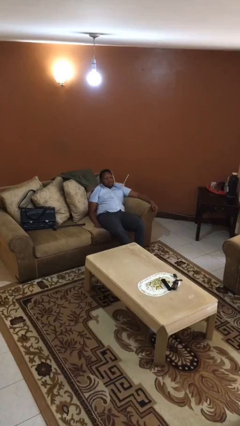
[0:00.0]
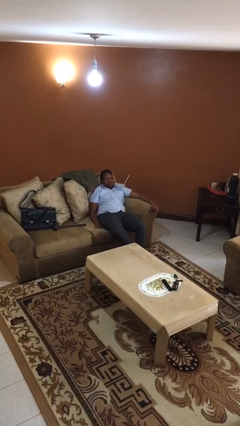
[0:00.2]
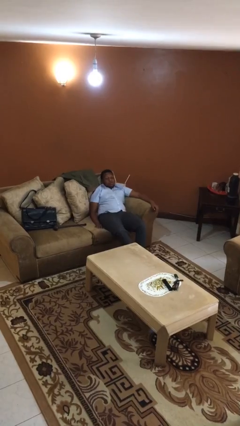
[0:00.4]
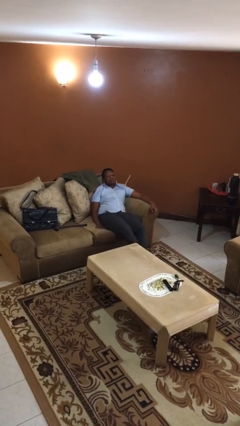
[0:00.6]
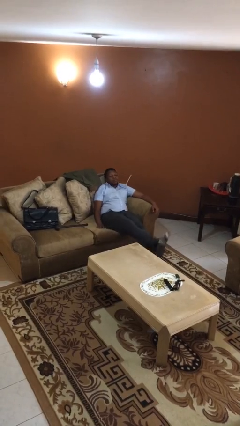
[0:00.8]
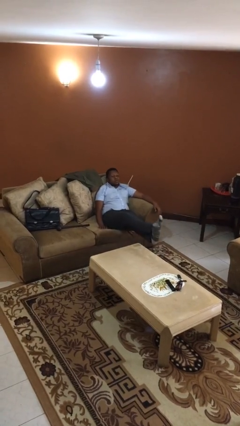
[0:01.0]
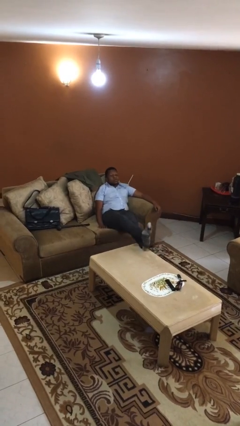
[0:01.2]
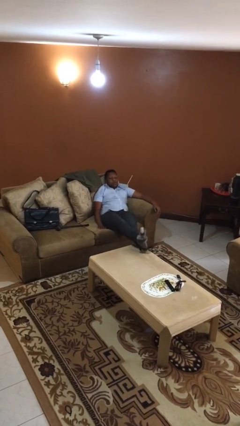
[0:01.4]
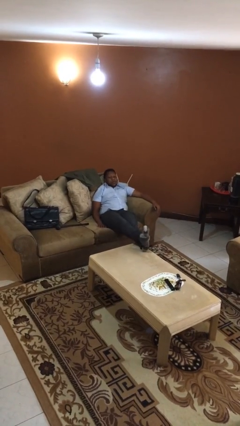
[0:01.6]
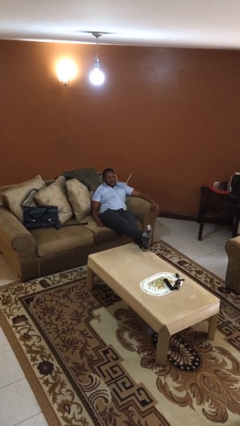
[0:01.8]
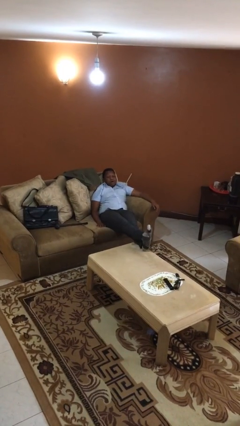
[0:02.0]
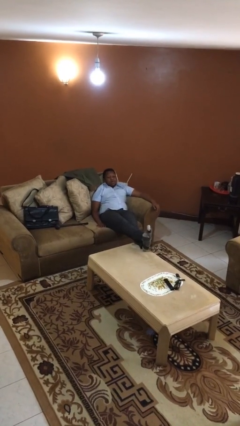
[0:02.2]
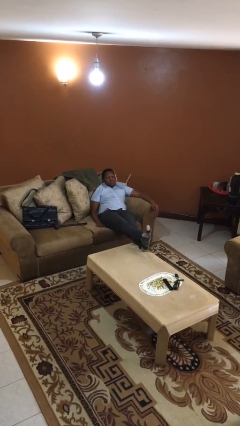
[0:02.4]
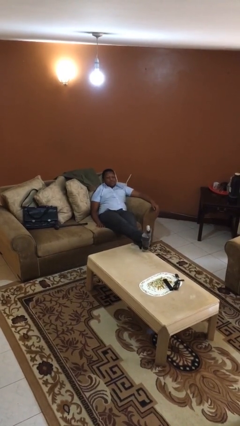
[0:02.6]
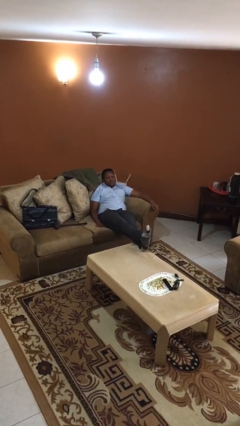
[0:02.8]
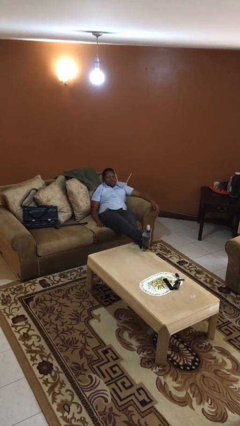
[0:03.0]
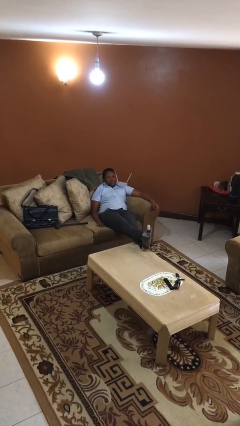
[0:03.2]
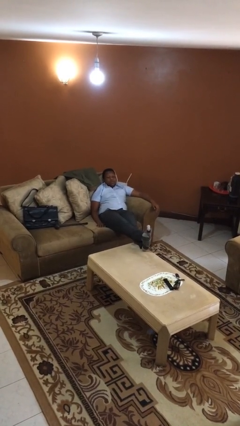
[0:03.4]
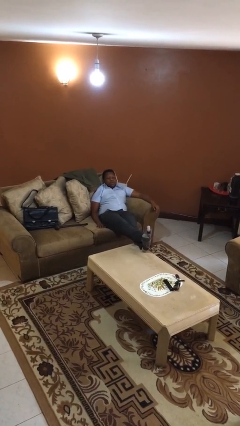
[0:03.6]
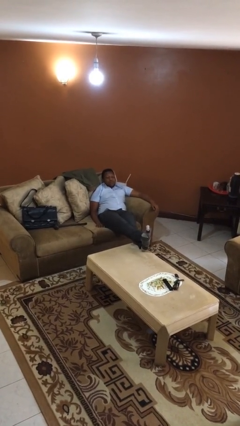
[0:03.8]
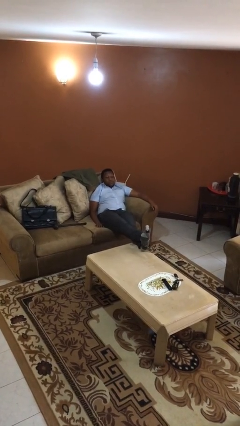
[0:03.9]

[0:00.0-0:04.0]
person puts feet up

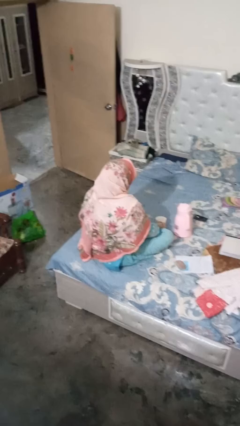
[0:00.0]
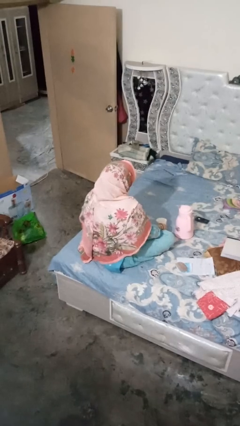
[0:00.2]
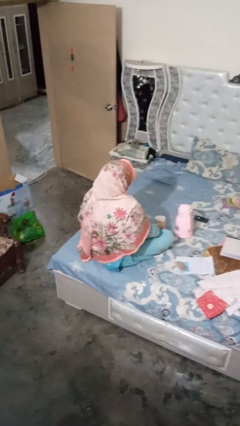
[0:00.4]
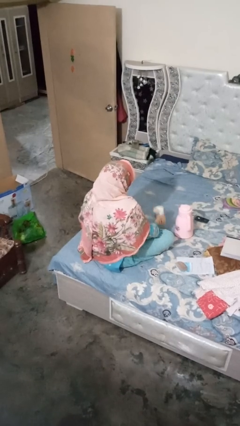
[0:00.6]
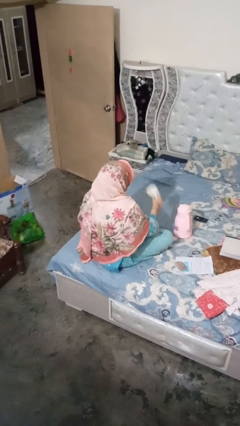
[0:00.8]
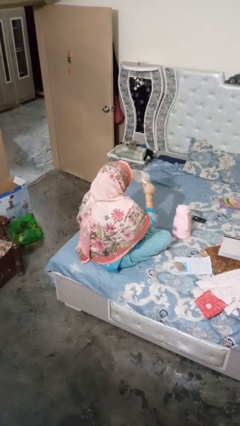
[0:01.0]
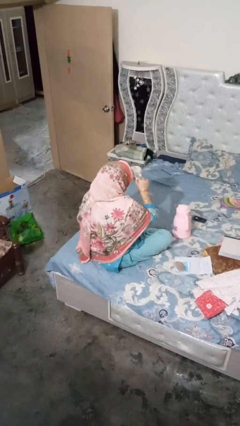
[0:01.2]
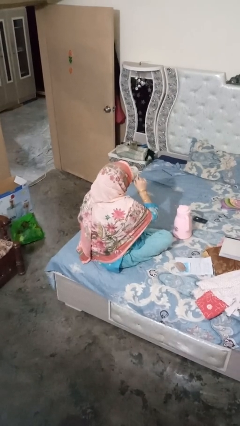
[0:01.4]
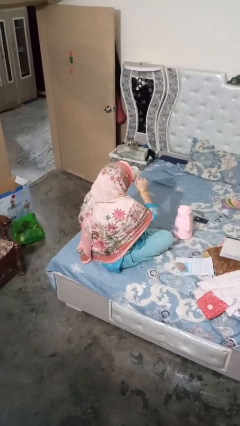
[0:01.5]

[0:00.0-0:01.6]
person pours coffee into mug

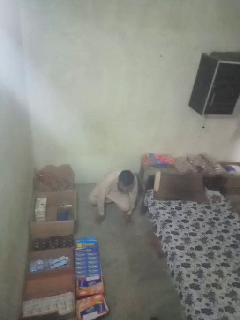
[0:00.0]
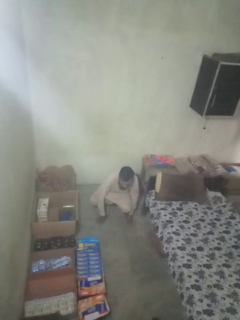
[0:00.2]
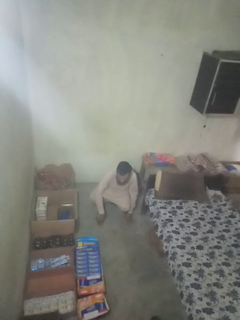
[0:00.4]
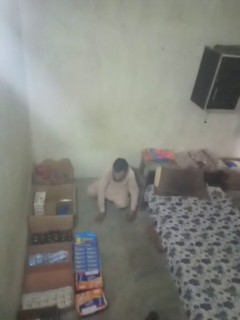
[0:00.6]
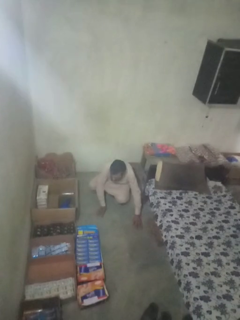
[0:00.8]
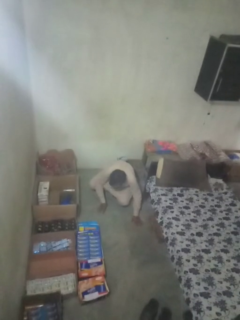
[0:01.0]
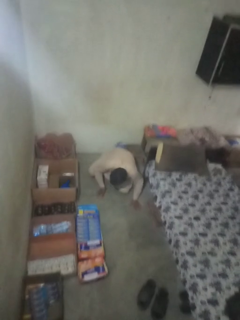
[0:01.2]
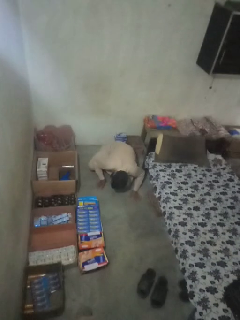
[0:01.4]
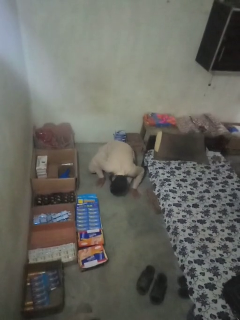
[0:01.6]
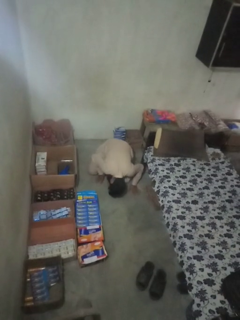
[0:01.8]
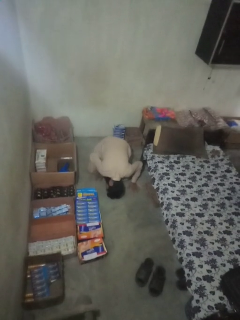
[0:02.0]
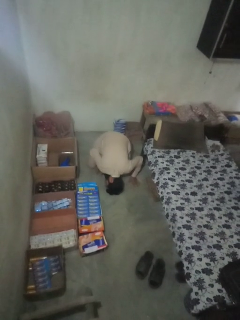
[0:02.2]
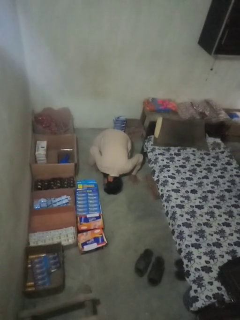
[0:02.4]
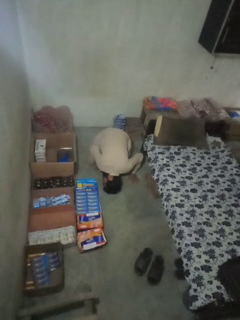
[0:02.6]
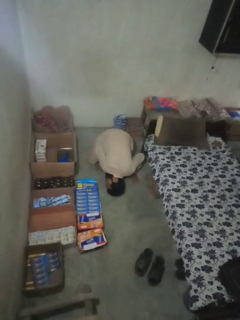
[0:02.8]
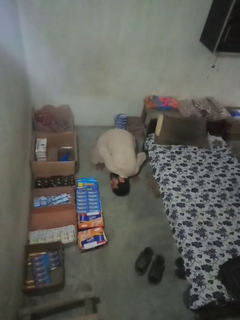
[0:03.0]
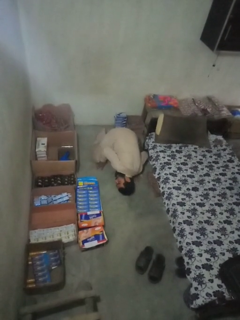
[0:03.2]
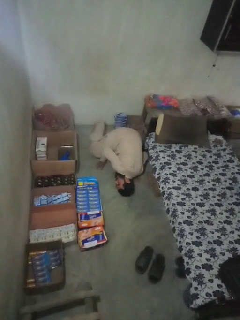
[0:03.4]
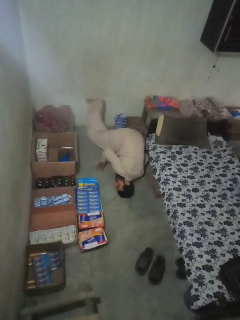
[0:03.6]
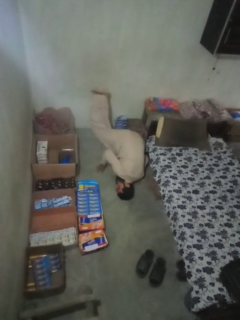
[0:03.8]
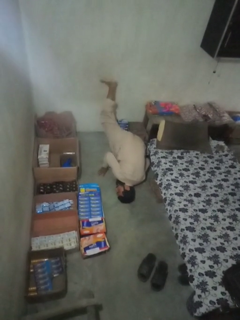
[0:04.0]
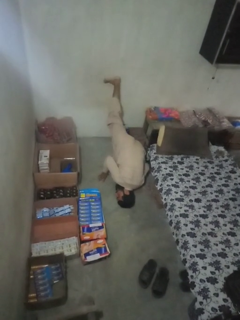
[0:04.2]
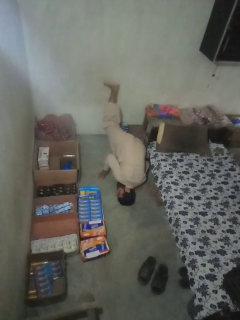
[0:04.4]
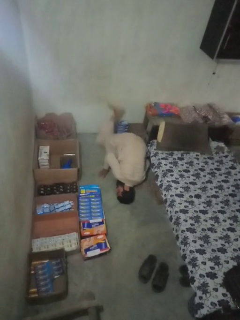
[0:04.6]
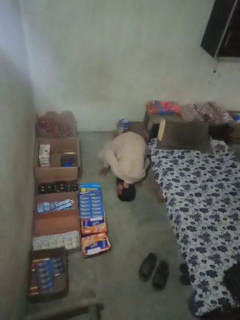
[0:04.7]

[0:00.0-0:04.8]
person lies down on floor

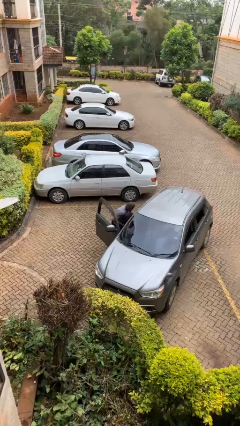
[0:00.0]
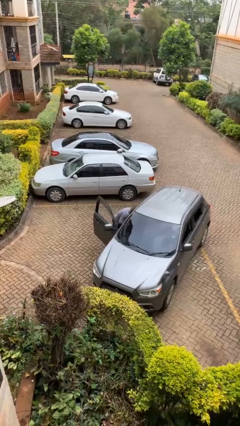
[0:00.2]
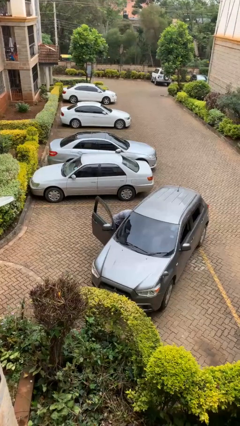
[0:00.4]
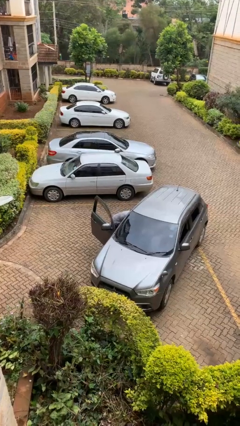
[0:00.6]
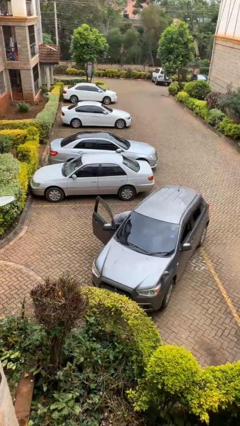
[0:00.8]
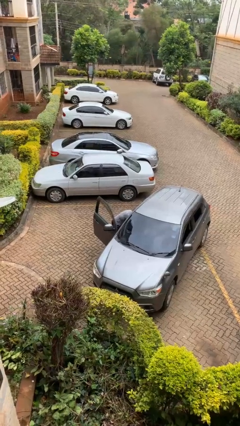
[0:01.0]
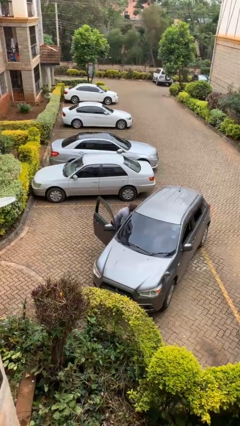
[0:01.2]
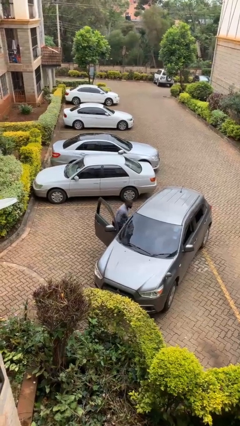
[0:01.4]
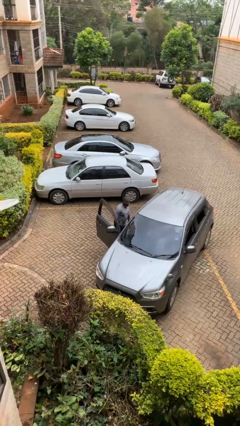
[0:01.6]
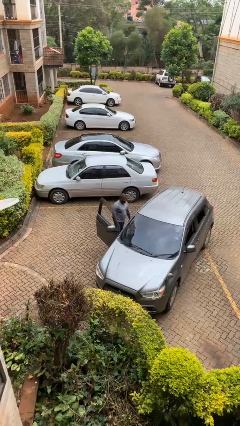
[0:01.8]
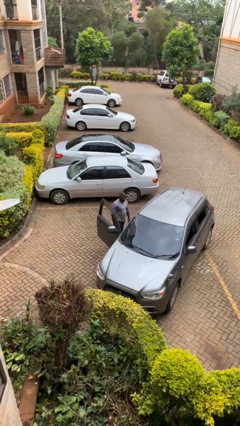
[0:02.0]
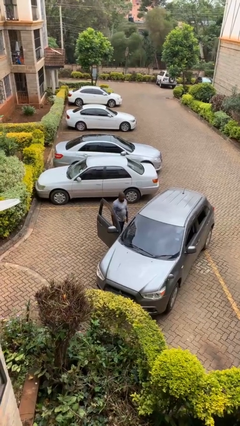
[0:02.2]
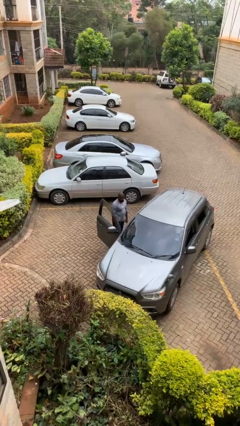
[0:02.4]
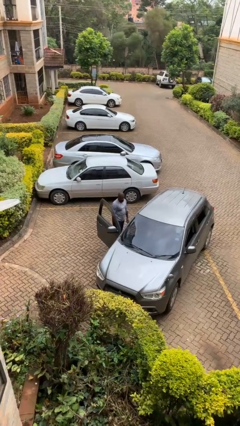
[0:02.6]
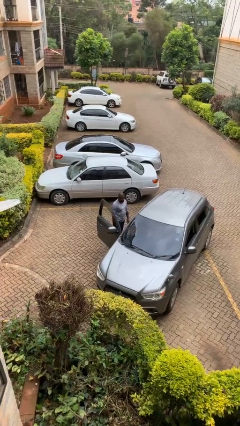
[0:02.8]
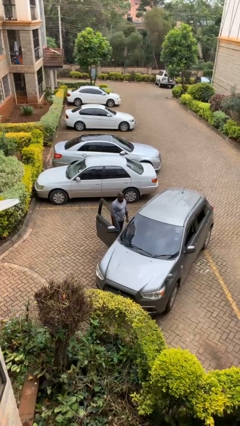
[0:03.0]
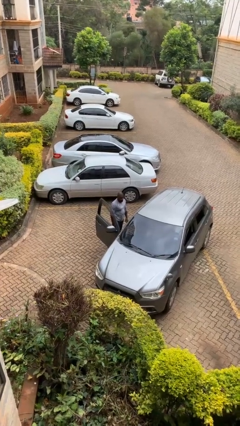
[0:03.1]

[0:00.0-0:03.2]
person loads car

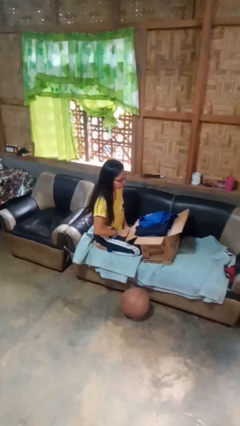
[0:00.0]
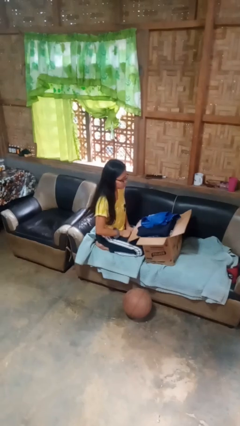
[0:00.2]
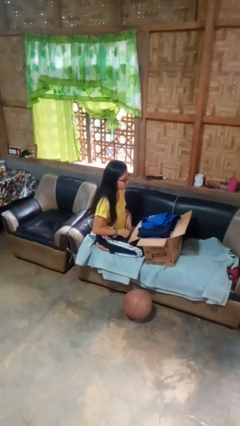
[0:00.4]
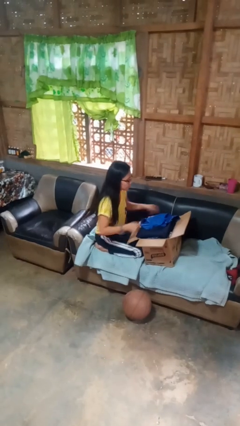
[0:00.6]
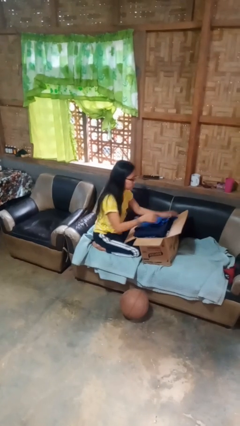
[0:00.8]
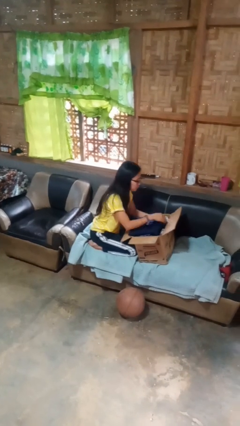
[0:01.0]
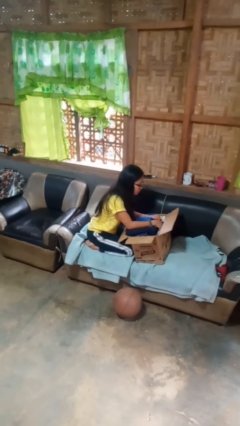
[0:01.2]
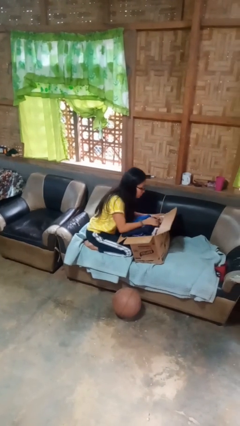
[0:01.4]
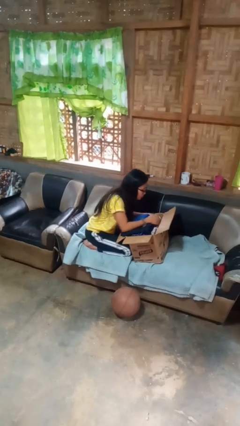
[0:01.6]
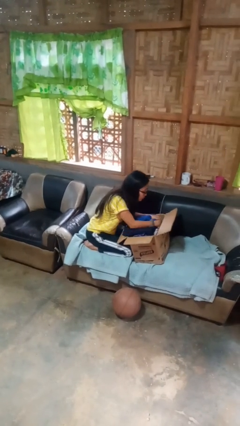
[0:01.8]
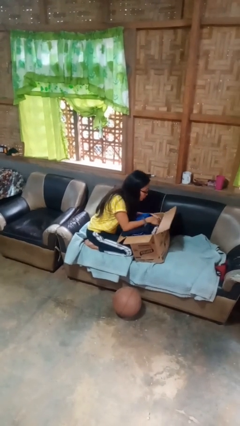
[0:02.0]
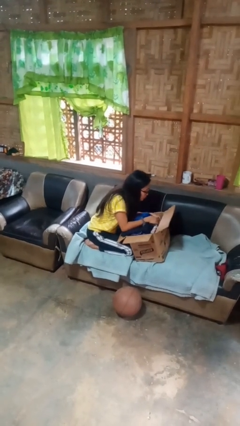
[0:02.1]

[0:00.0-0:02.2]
person searches in box

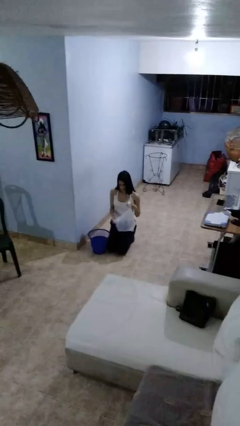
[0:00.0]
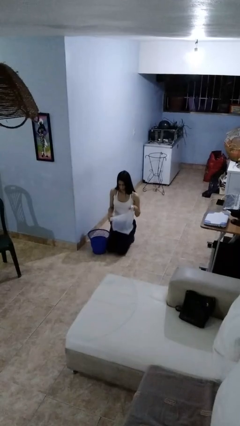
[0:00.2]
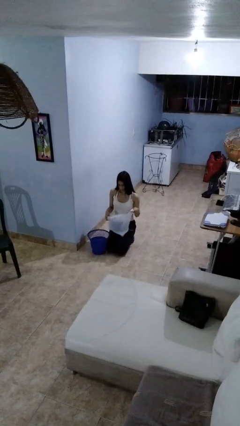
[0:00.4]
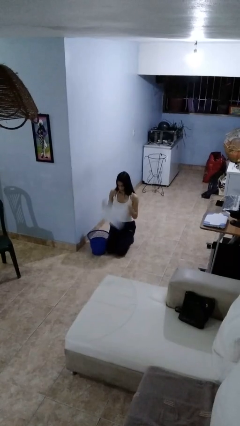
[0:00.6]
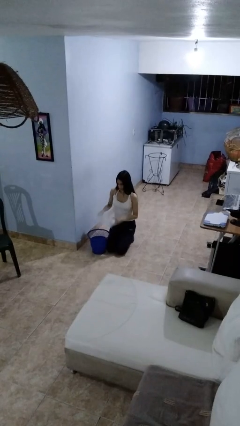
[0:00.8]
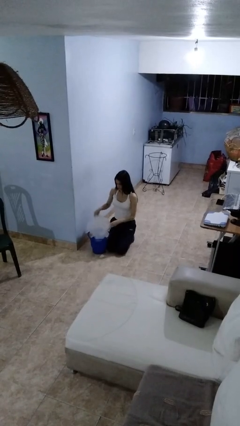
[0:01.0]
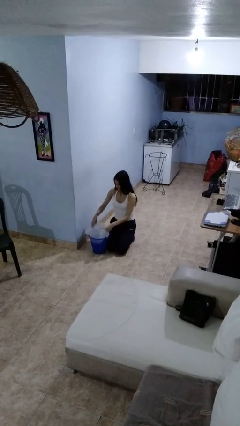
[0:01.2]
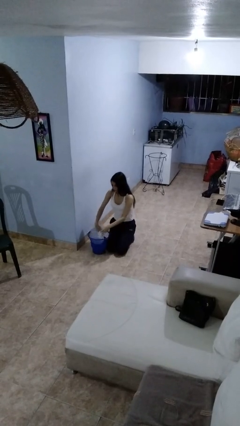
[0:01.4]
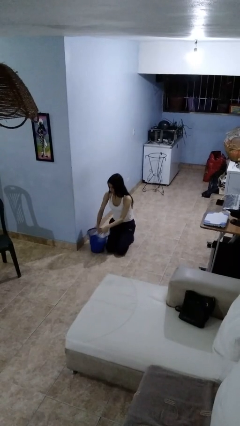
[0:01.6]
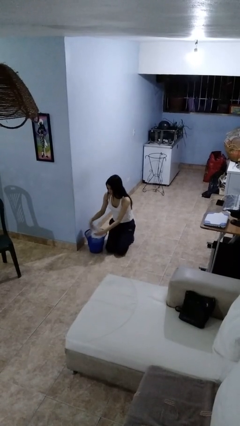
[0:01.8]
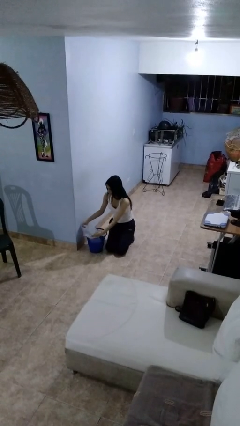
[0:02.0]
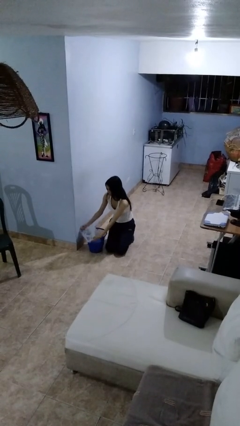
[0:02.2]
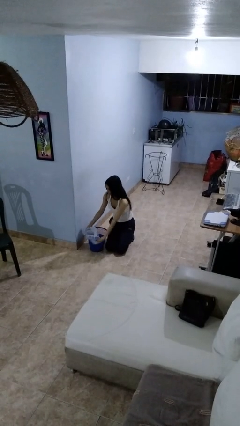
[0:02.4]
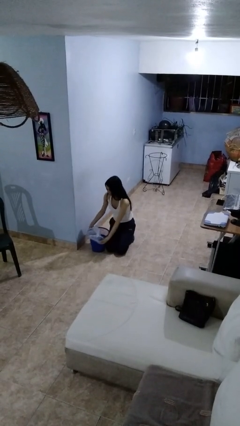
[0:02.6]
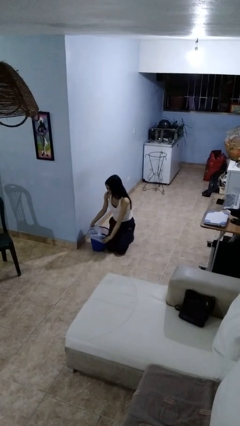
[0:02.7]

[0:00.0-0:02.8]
person inserts trashbag into trashcan

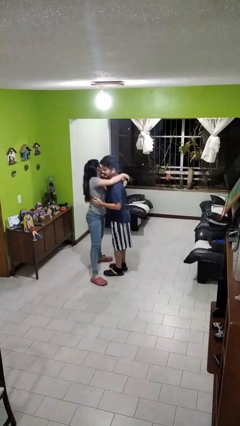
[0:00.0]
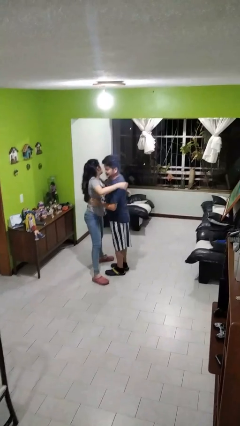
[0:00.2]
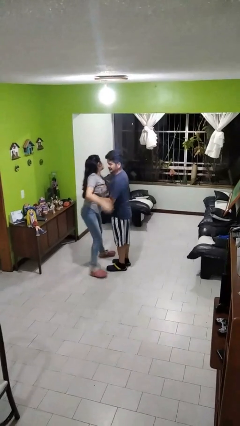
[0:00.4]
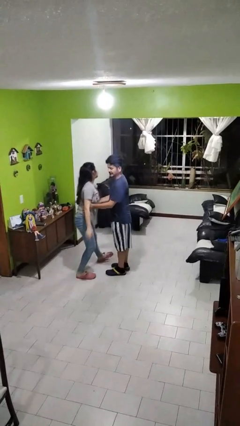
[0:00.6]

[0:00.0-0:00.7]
person puts down person
